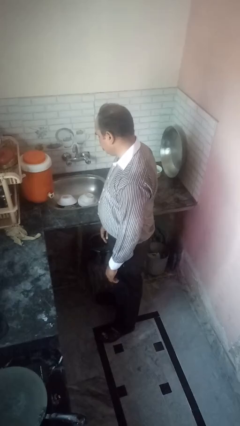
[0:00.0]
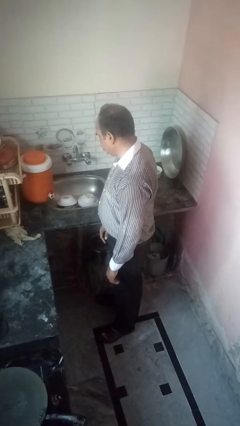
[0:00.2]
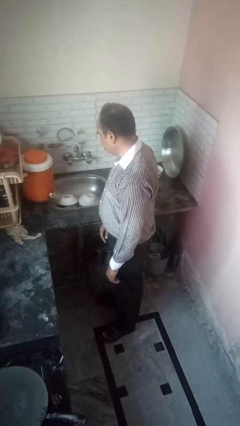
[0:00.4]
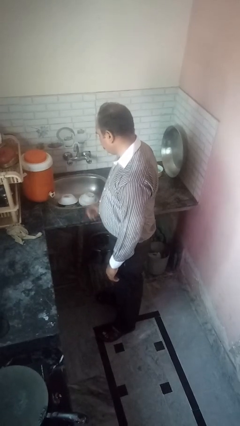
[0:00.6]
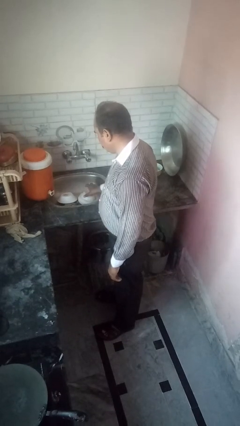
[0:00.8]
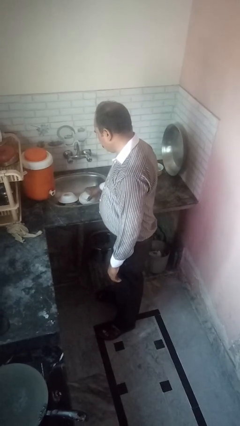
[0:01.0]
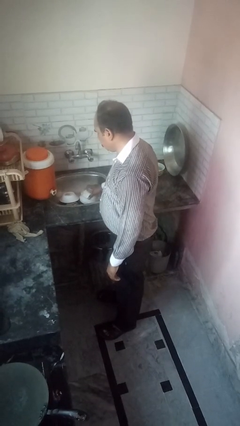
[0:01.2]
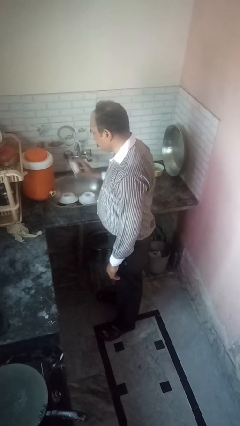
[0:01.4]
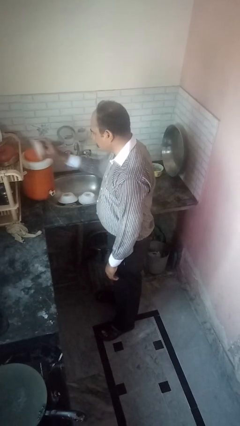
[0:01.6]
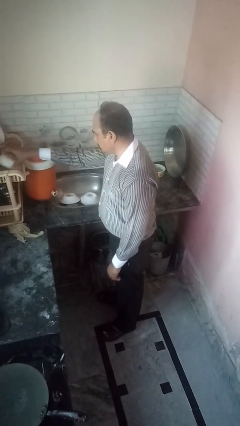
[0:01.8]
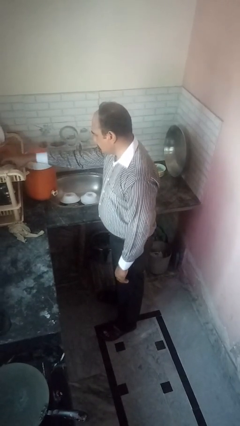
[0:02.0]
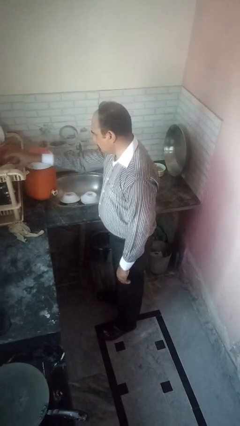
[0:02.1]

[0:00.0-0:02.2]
person unloads dishwasher

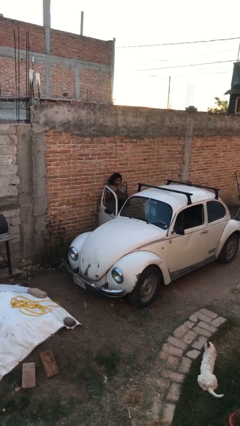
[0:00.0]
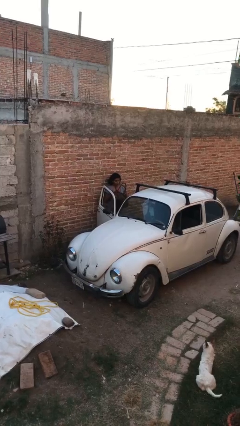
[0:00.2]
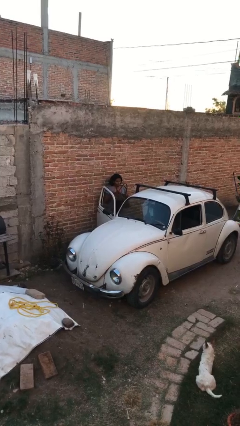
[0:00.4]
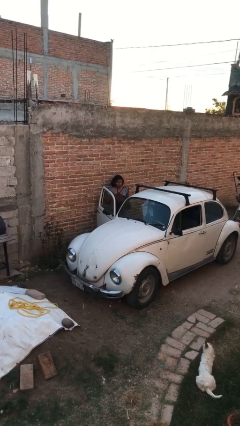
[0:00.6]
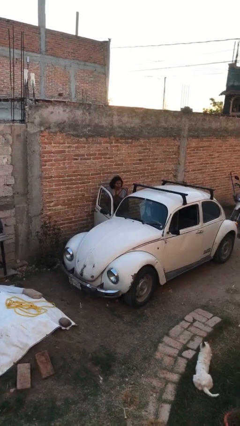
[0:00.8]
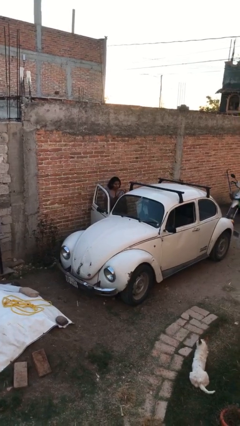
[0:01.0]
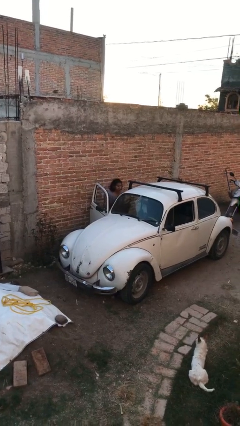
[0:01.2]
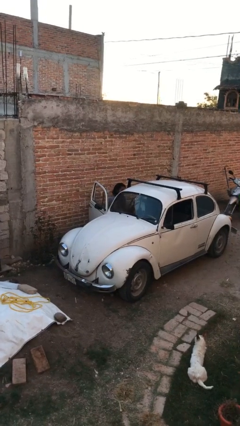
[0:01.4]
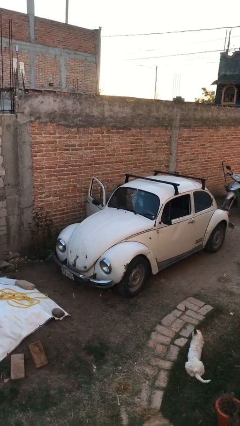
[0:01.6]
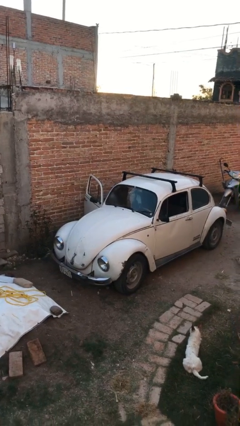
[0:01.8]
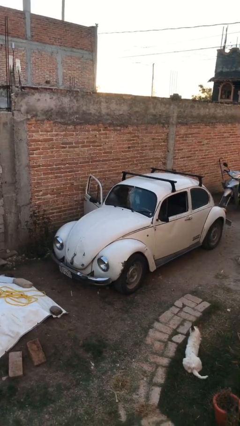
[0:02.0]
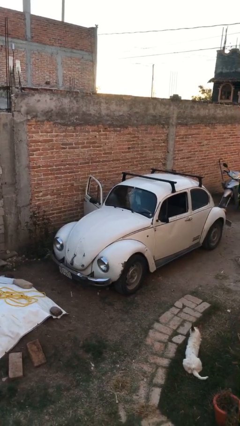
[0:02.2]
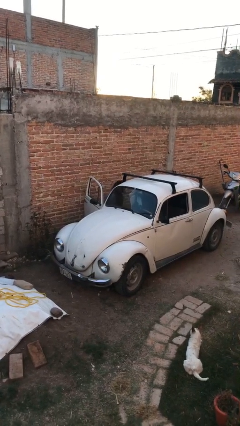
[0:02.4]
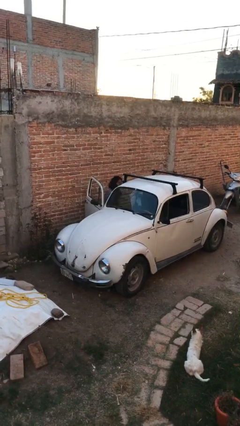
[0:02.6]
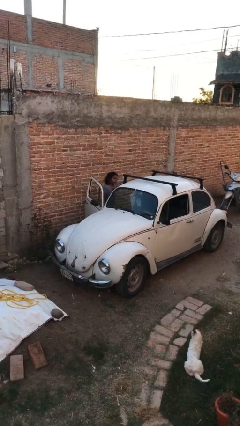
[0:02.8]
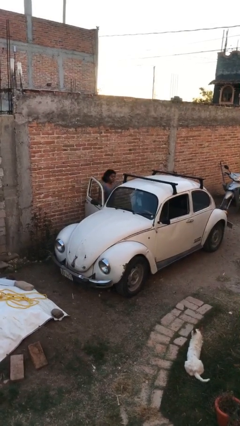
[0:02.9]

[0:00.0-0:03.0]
person loads car

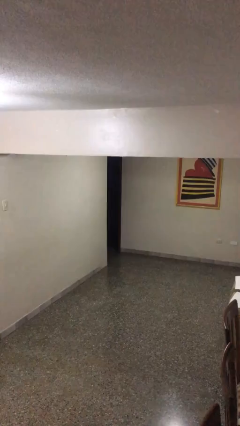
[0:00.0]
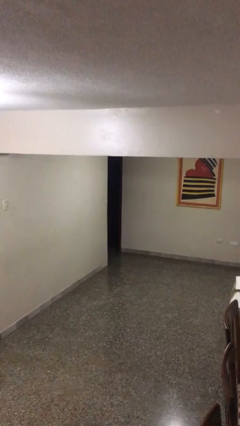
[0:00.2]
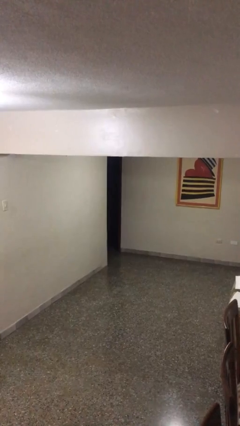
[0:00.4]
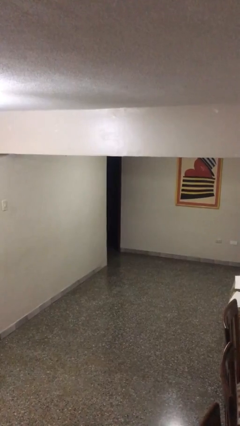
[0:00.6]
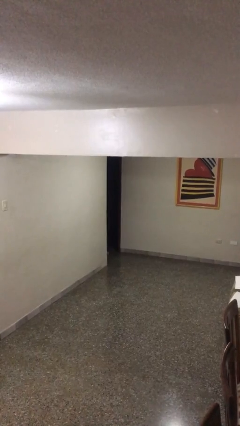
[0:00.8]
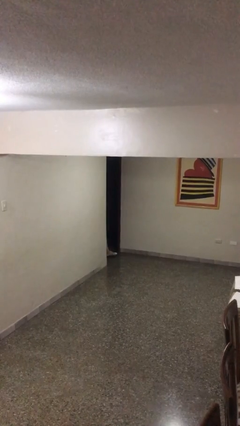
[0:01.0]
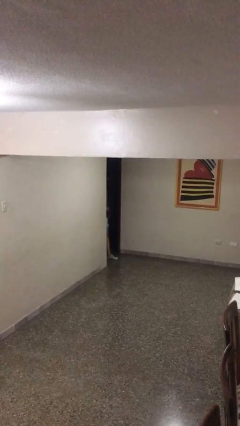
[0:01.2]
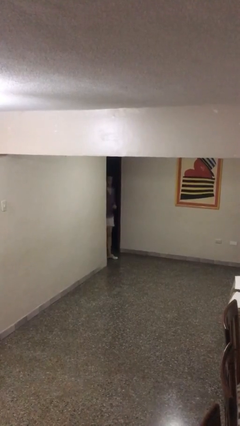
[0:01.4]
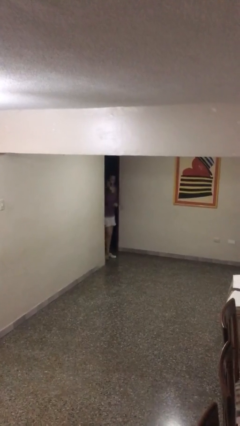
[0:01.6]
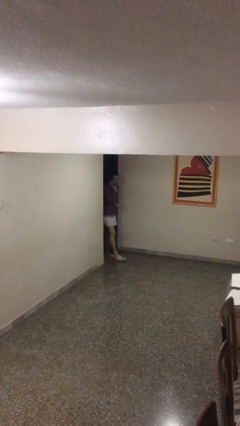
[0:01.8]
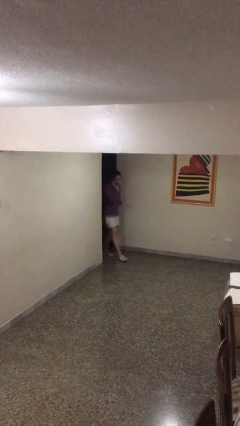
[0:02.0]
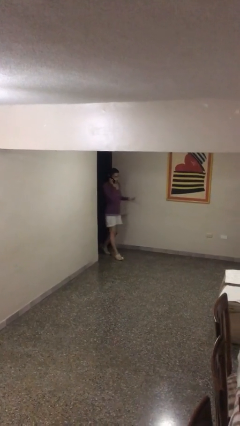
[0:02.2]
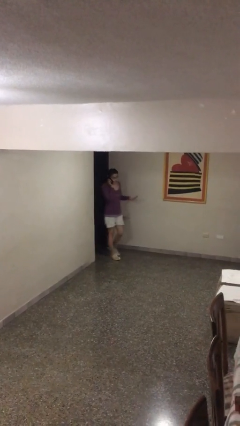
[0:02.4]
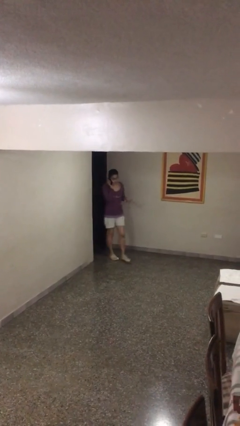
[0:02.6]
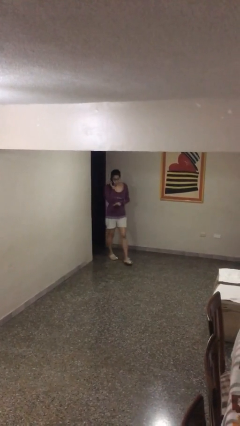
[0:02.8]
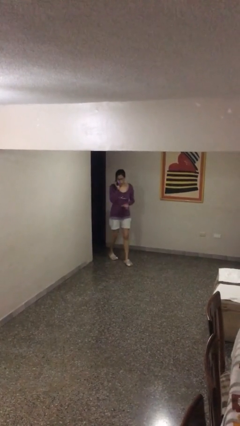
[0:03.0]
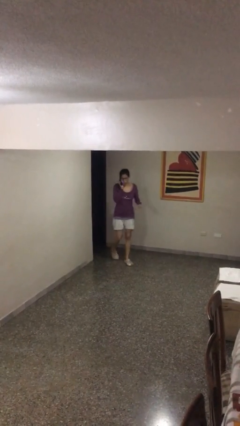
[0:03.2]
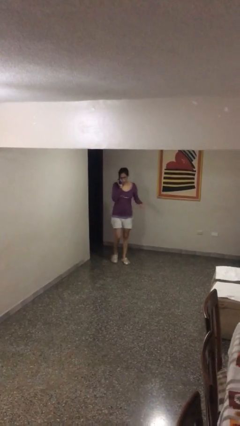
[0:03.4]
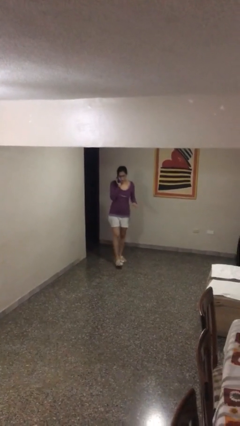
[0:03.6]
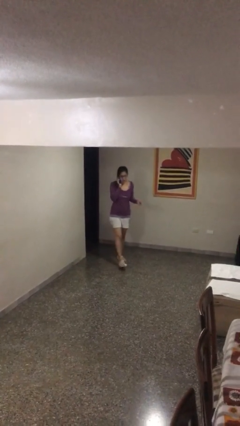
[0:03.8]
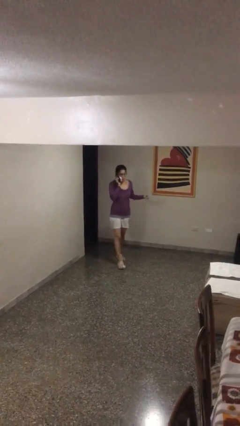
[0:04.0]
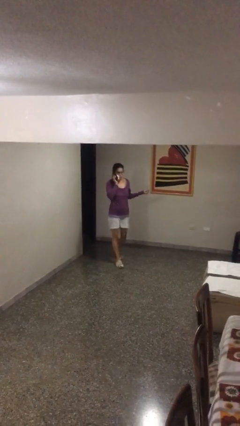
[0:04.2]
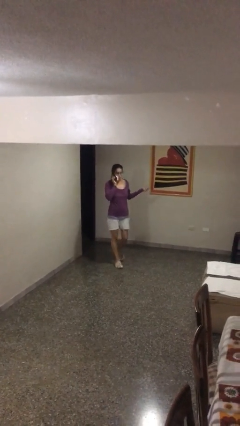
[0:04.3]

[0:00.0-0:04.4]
person enters scene through structure

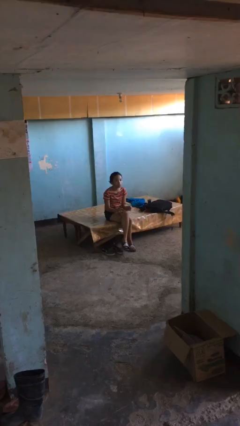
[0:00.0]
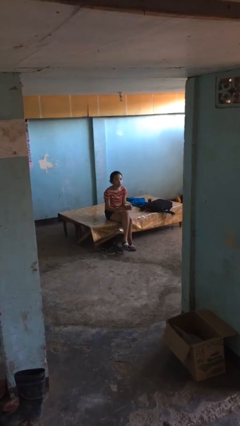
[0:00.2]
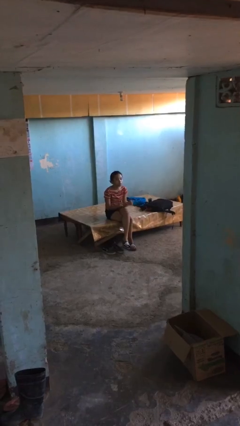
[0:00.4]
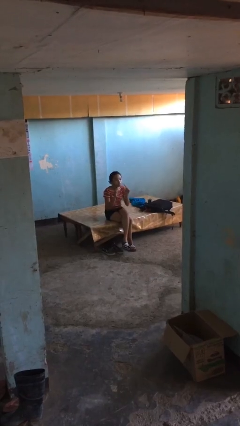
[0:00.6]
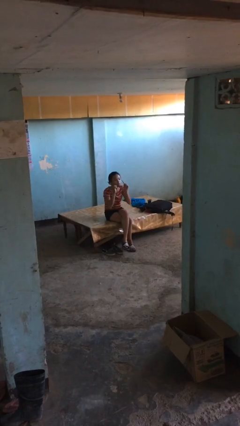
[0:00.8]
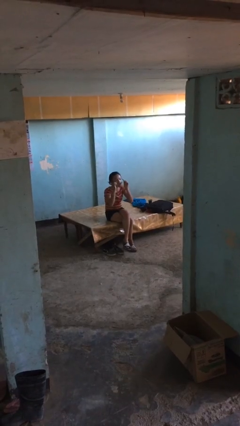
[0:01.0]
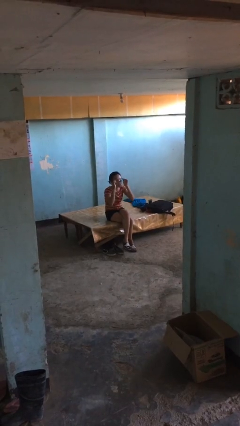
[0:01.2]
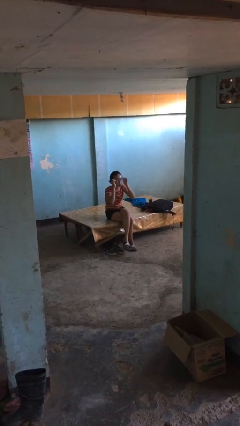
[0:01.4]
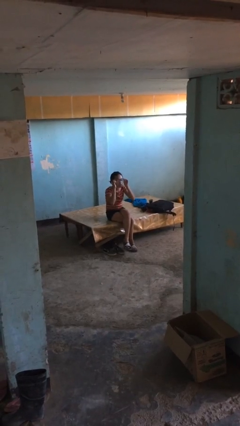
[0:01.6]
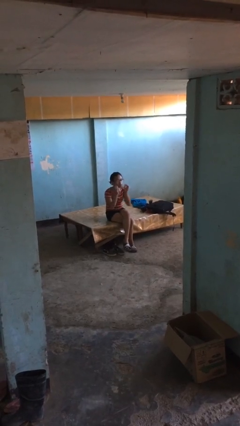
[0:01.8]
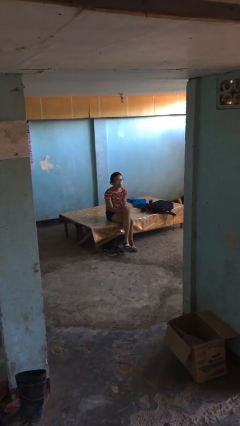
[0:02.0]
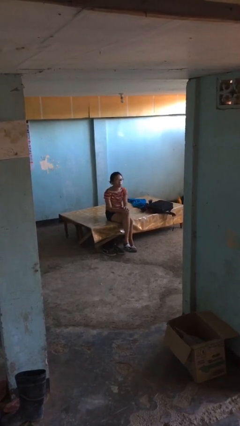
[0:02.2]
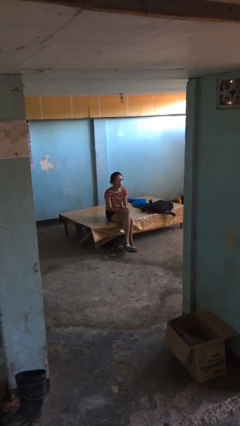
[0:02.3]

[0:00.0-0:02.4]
person puts on glasses

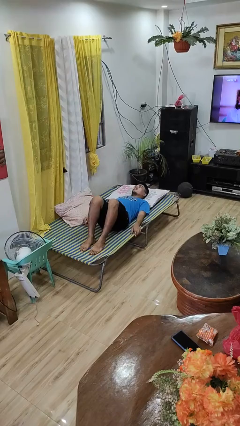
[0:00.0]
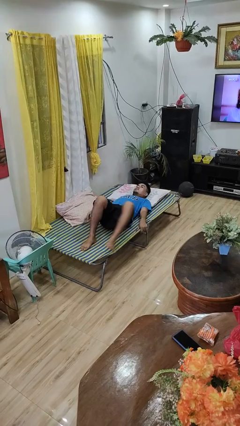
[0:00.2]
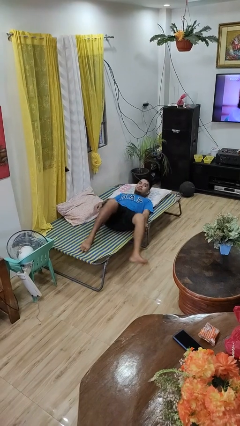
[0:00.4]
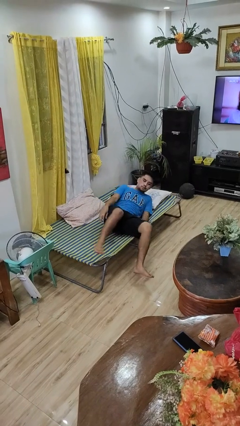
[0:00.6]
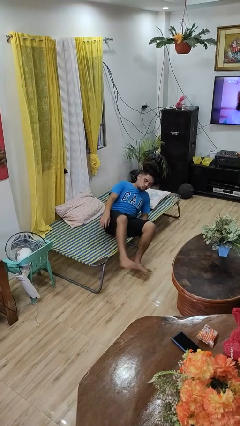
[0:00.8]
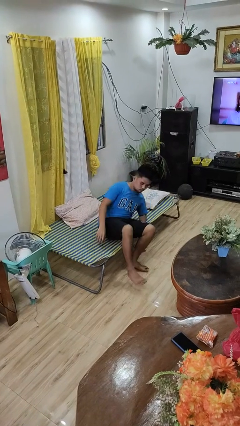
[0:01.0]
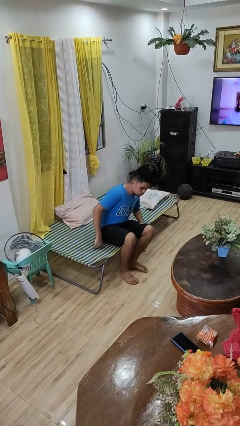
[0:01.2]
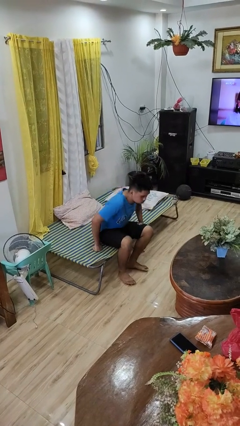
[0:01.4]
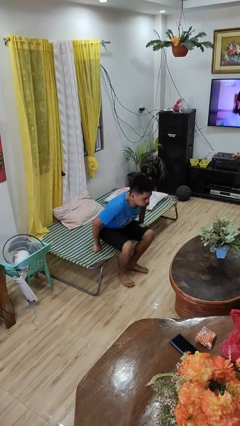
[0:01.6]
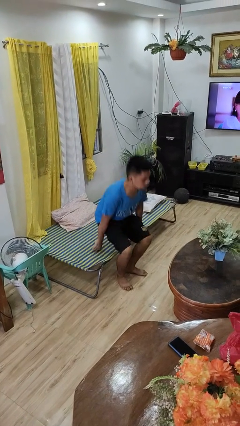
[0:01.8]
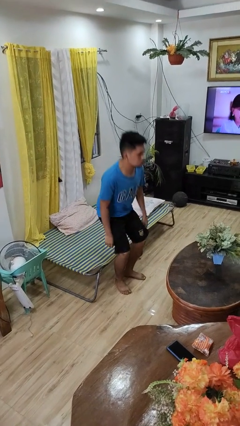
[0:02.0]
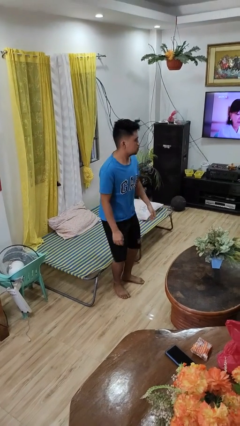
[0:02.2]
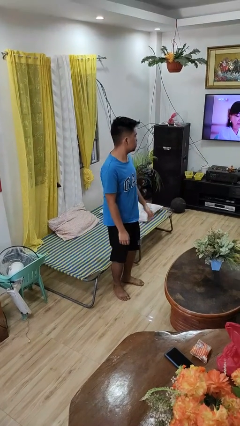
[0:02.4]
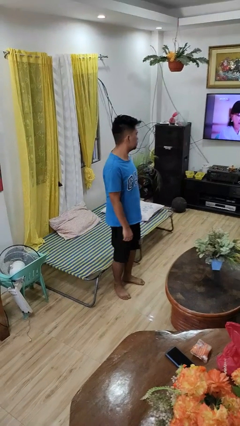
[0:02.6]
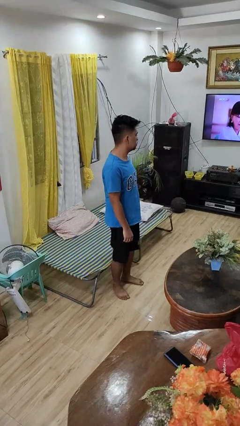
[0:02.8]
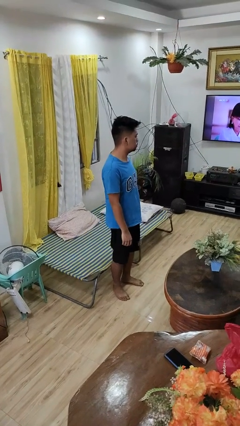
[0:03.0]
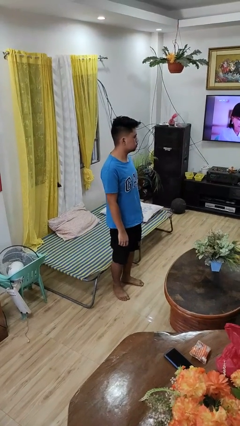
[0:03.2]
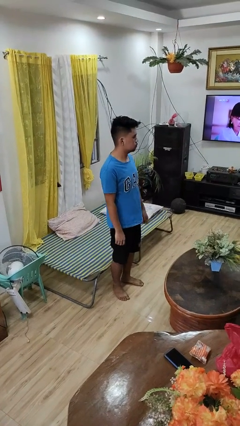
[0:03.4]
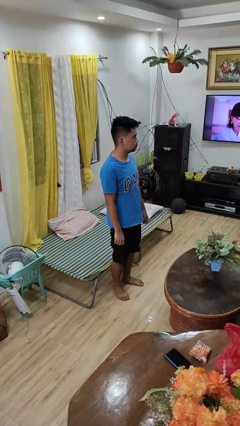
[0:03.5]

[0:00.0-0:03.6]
person stands up

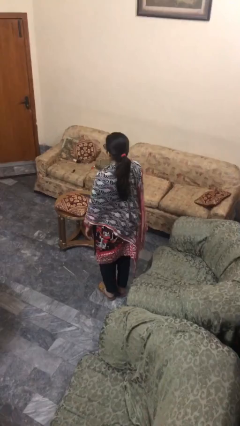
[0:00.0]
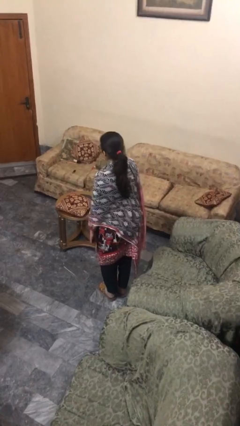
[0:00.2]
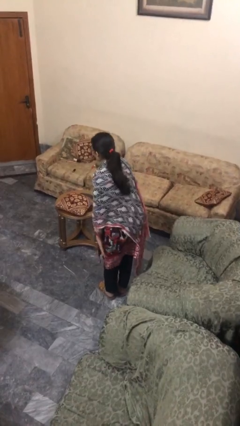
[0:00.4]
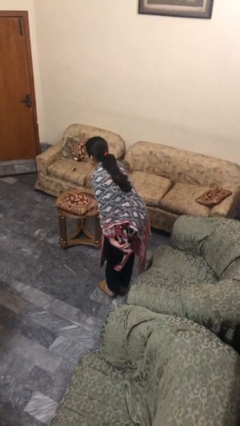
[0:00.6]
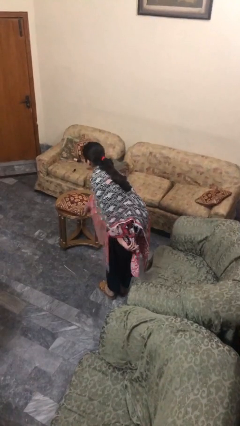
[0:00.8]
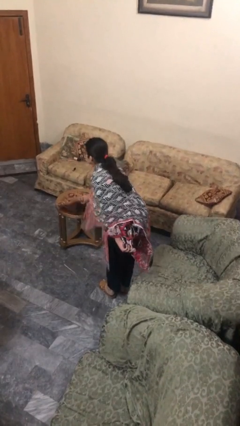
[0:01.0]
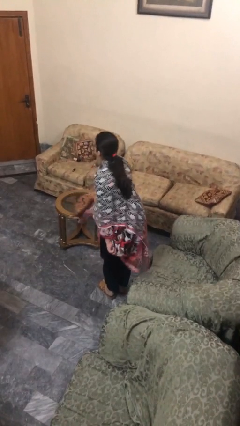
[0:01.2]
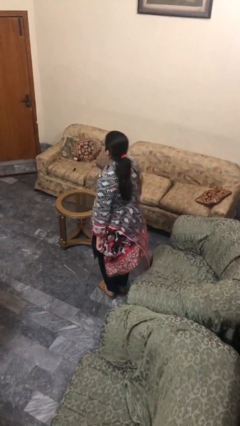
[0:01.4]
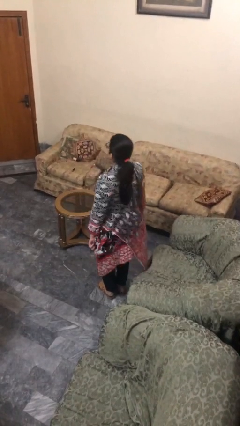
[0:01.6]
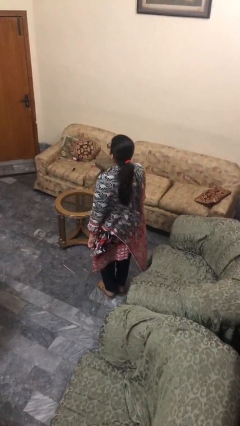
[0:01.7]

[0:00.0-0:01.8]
person picks up object from table
